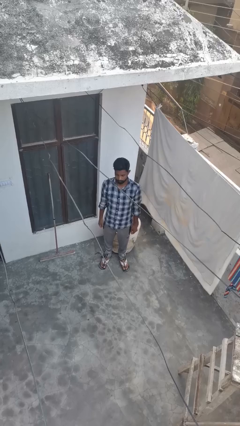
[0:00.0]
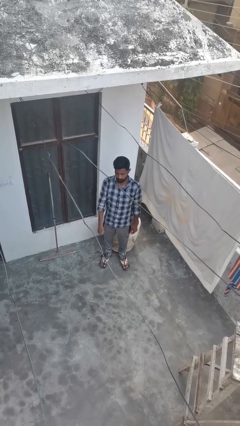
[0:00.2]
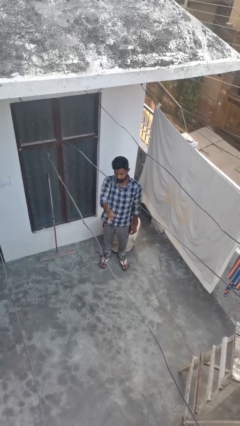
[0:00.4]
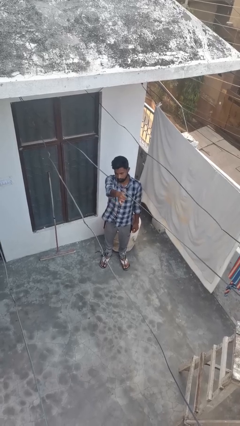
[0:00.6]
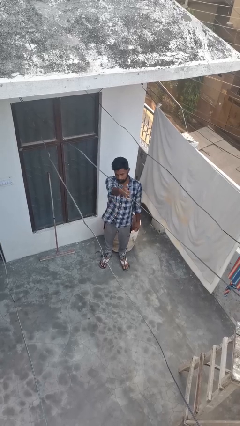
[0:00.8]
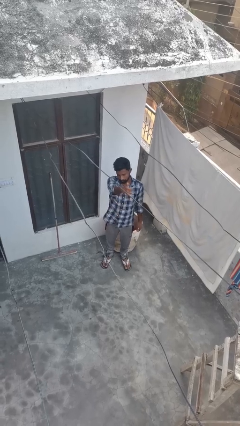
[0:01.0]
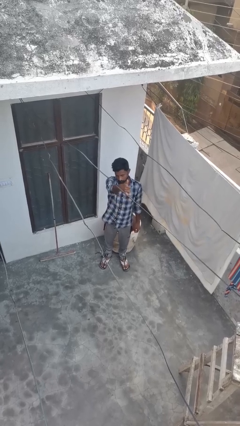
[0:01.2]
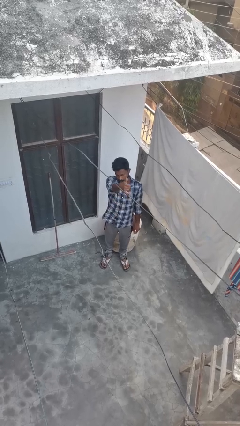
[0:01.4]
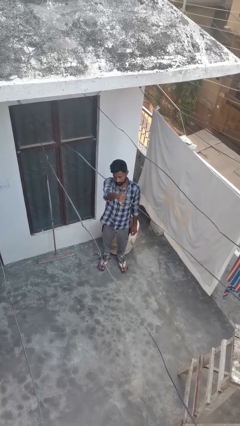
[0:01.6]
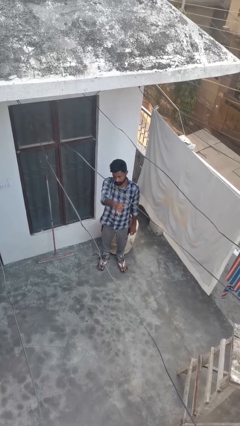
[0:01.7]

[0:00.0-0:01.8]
person gestures hang loose

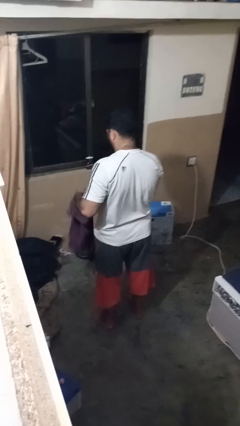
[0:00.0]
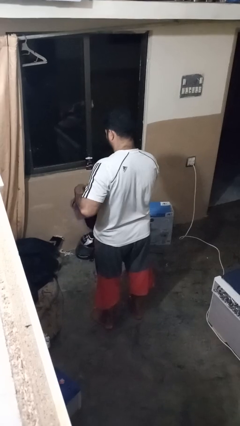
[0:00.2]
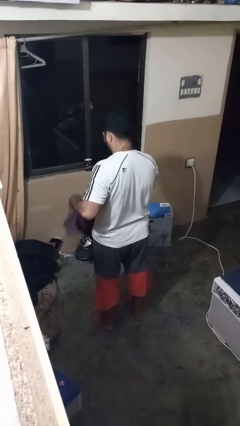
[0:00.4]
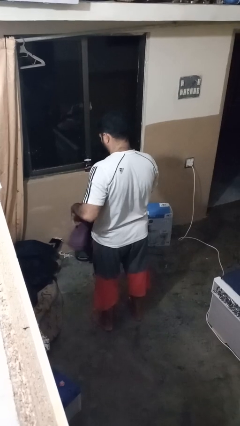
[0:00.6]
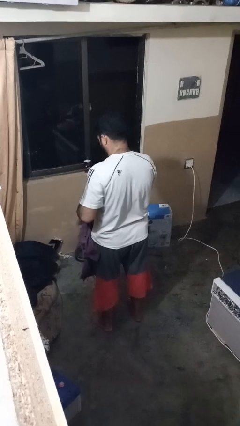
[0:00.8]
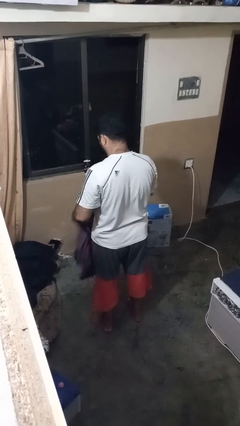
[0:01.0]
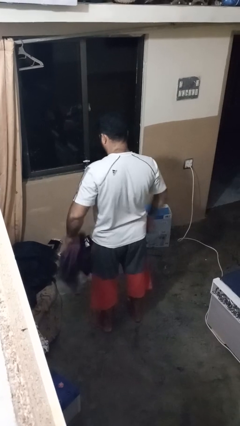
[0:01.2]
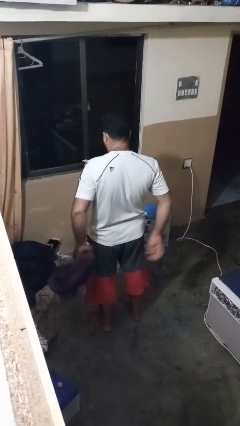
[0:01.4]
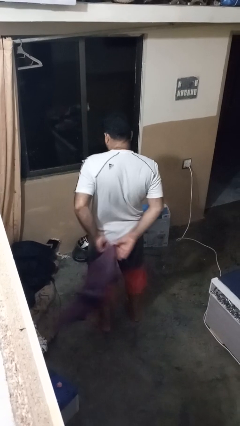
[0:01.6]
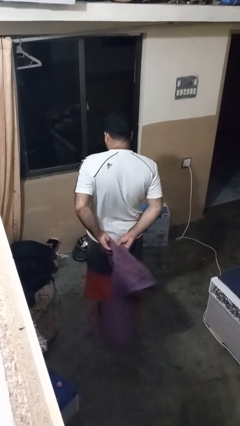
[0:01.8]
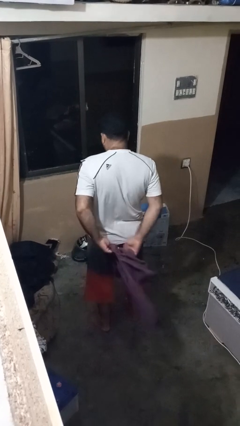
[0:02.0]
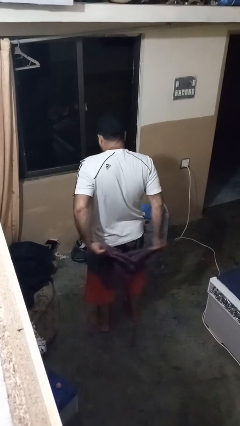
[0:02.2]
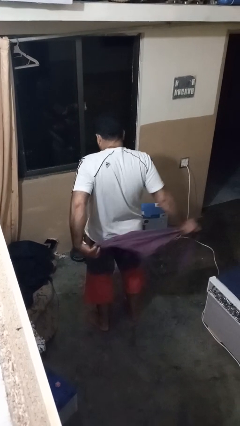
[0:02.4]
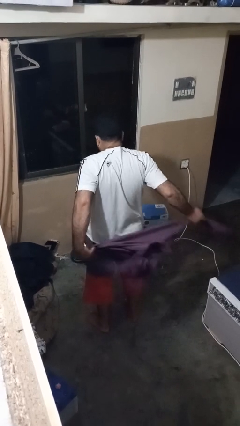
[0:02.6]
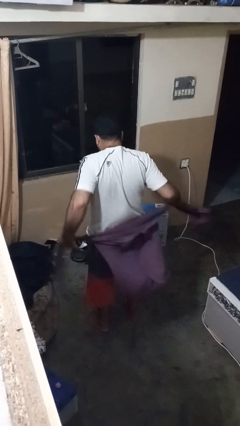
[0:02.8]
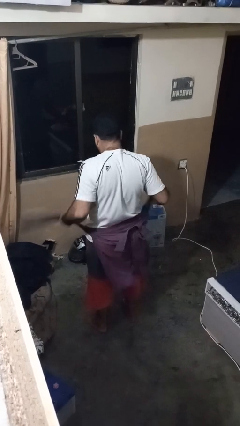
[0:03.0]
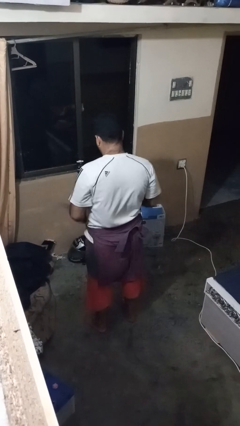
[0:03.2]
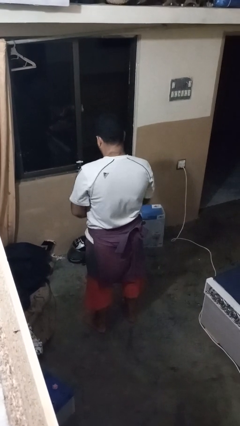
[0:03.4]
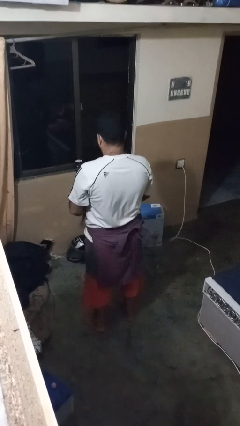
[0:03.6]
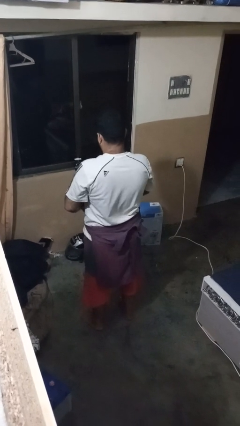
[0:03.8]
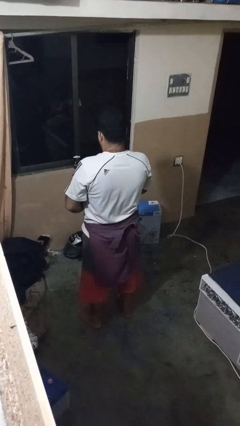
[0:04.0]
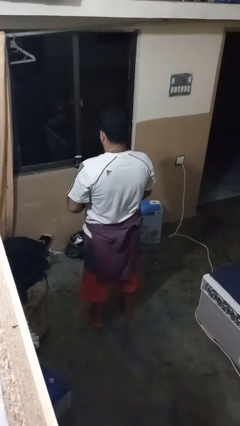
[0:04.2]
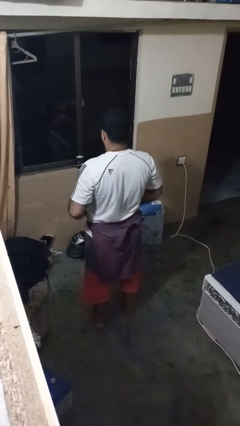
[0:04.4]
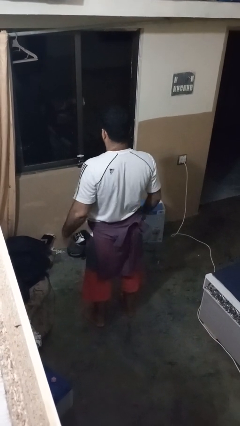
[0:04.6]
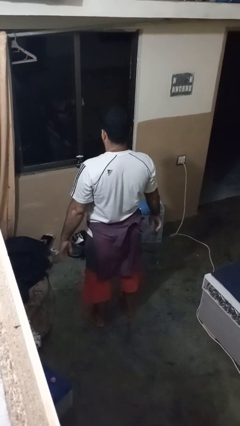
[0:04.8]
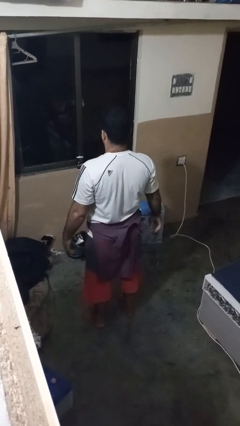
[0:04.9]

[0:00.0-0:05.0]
person ties jacket around waist

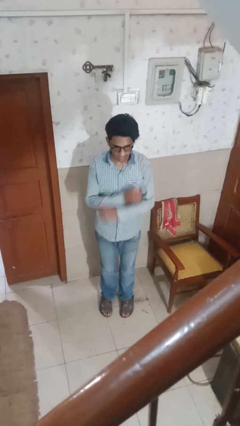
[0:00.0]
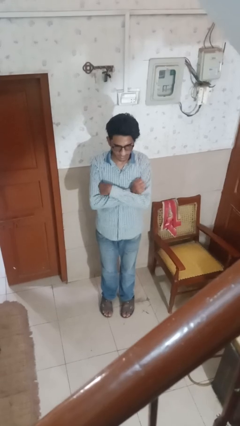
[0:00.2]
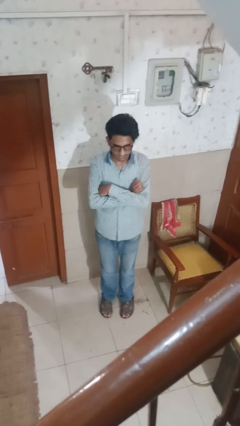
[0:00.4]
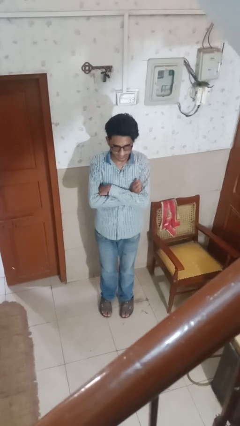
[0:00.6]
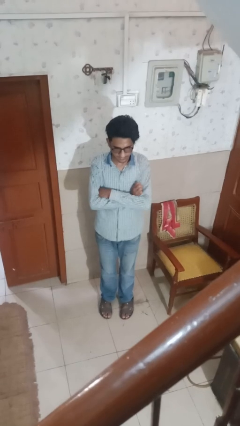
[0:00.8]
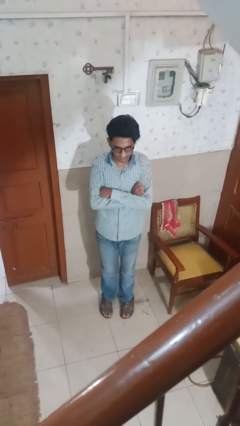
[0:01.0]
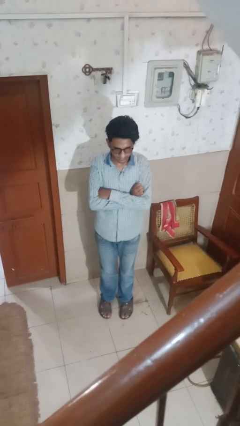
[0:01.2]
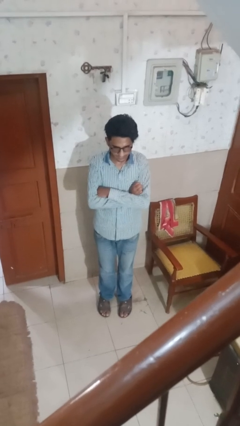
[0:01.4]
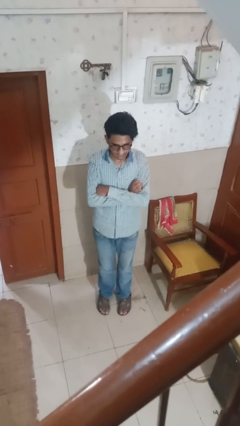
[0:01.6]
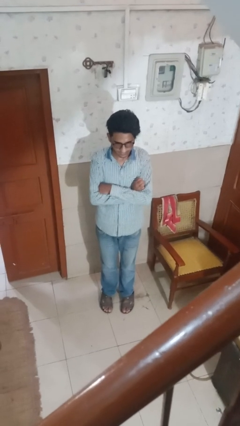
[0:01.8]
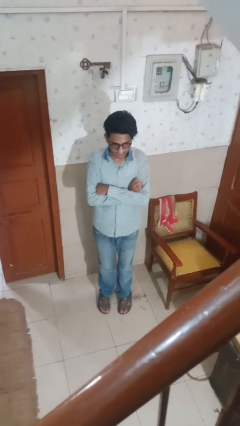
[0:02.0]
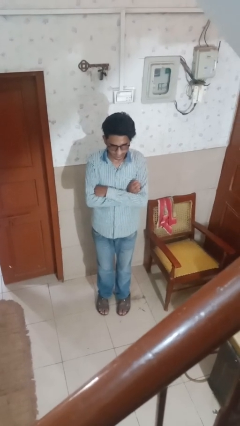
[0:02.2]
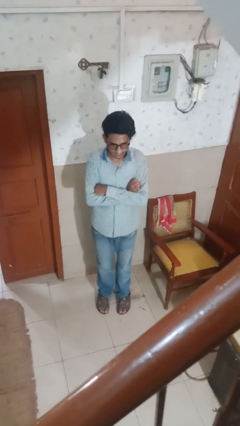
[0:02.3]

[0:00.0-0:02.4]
person crosses arms

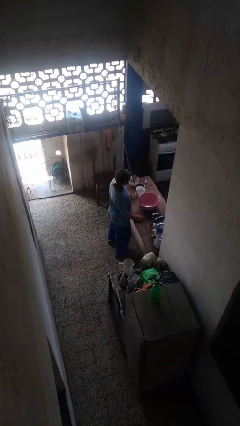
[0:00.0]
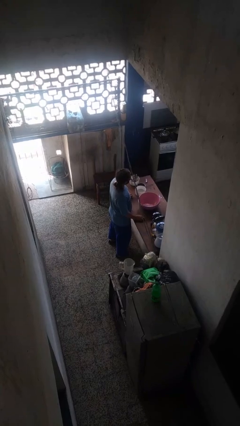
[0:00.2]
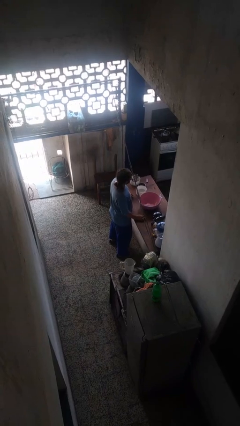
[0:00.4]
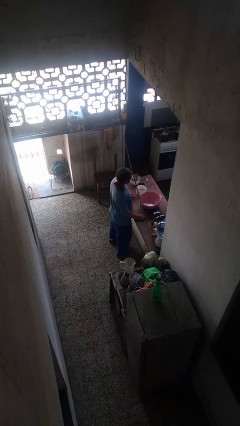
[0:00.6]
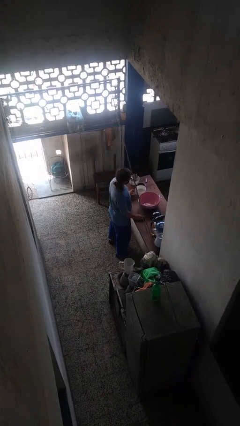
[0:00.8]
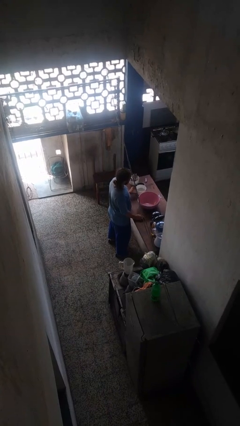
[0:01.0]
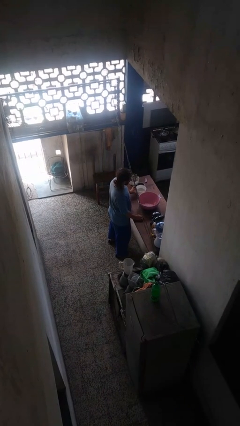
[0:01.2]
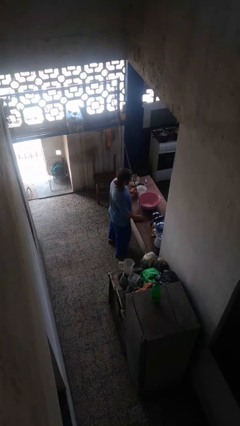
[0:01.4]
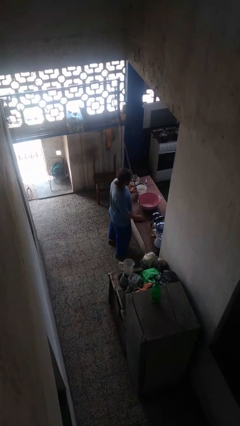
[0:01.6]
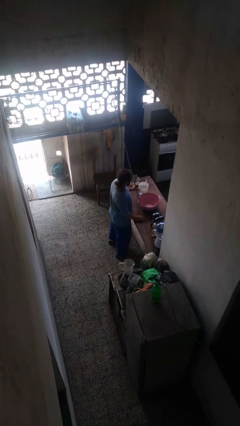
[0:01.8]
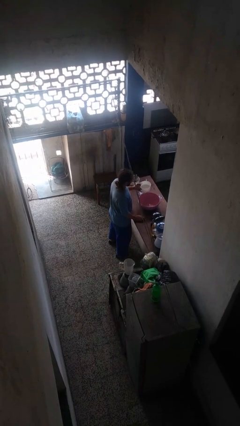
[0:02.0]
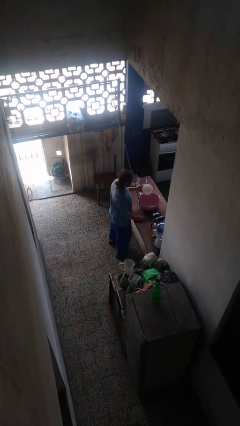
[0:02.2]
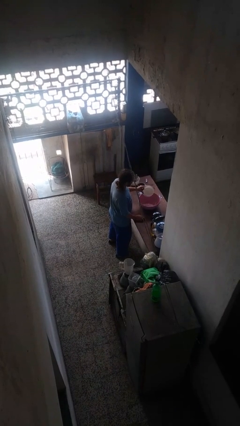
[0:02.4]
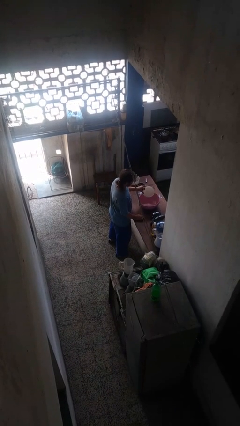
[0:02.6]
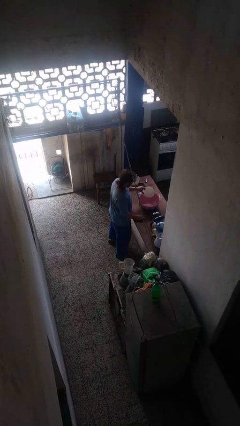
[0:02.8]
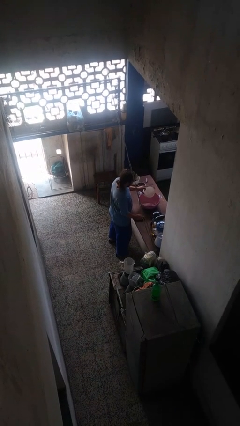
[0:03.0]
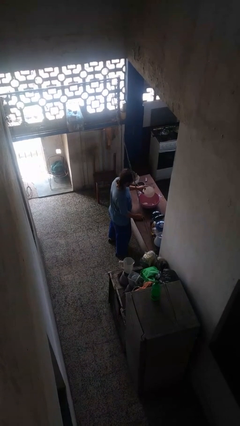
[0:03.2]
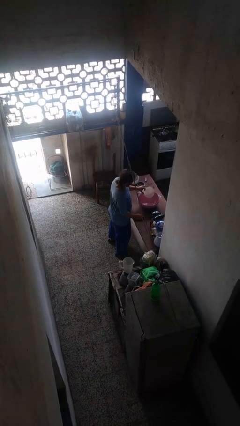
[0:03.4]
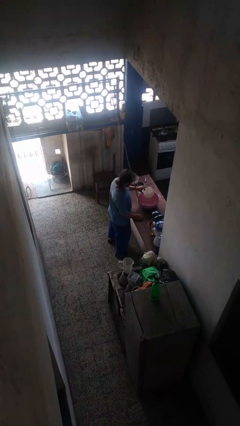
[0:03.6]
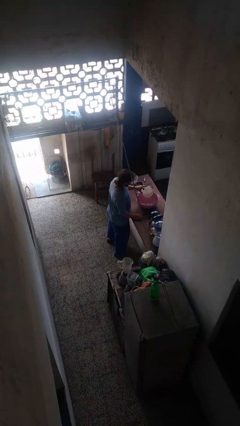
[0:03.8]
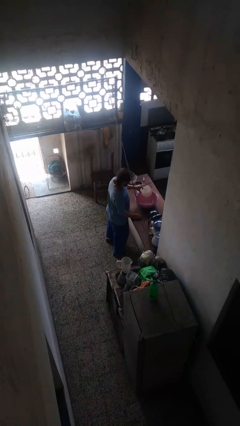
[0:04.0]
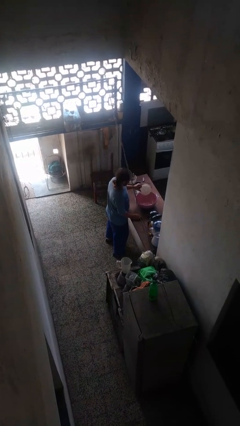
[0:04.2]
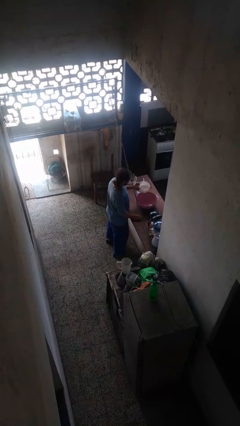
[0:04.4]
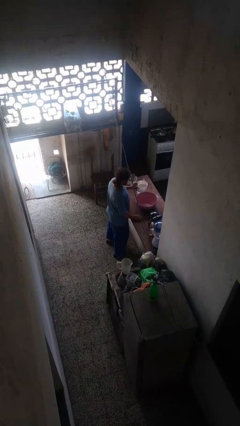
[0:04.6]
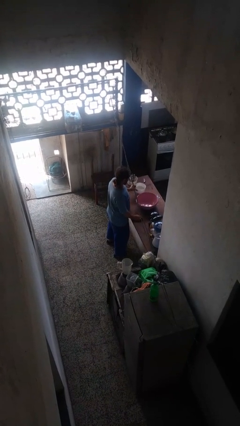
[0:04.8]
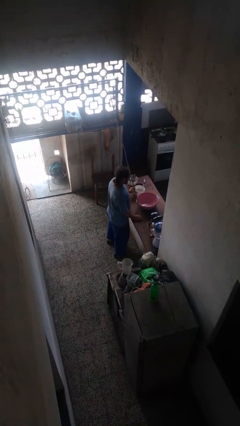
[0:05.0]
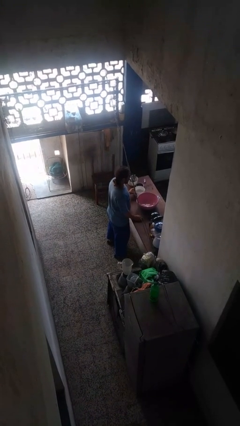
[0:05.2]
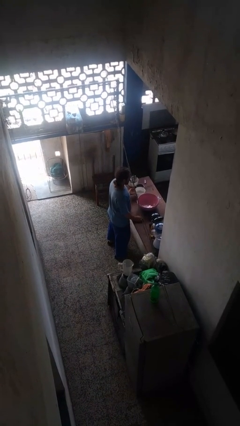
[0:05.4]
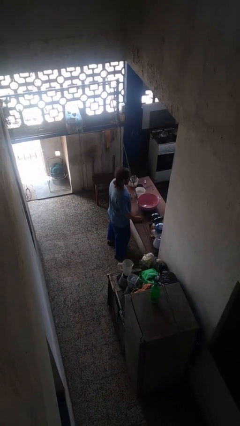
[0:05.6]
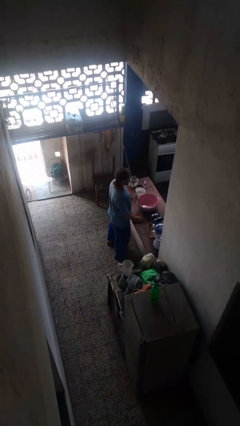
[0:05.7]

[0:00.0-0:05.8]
person pours into bowl

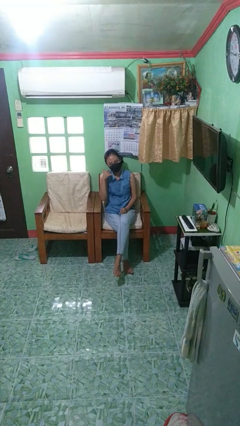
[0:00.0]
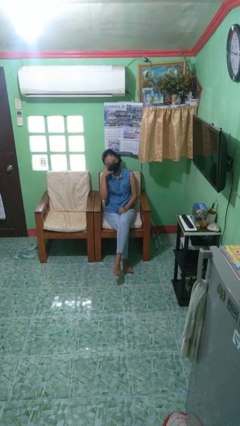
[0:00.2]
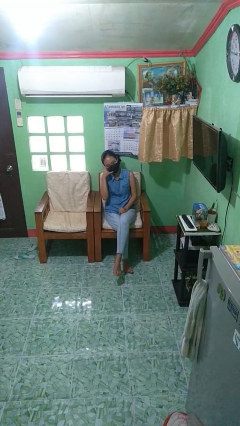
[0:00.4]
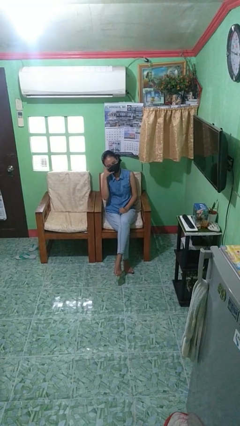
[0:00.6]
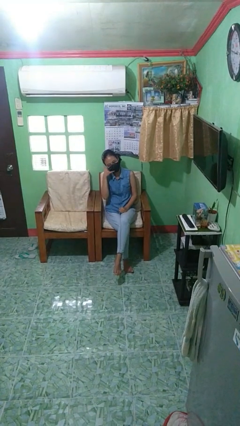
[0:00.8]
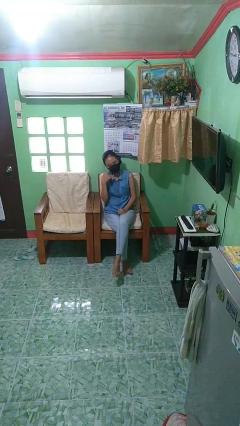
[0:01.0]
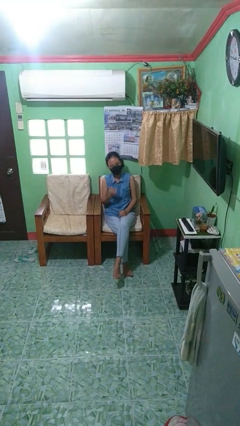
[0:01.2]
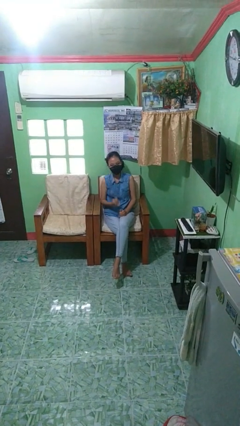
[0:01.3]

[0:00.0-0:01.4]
person gestures call me

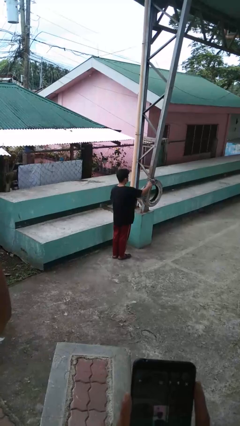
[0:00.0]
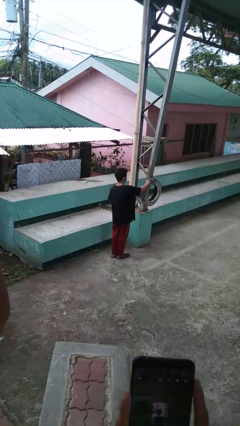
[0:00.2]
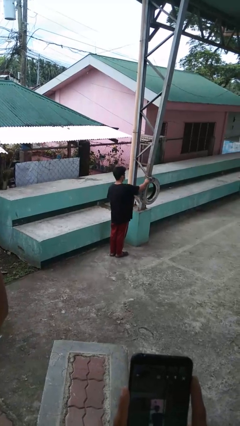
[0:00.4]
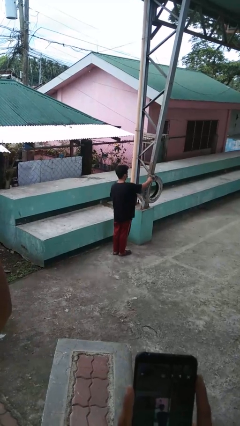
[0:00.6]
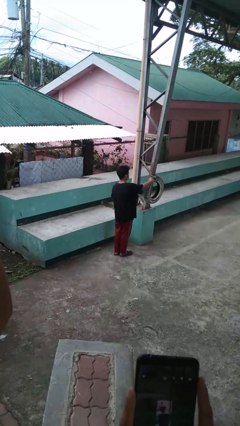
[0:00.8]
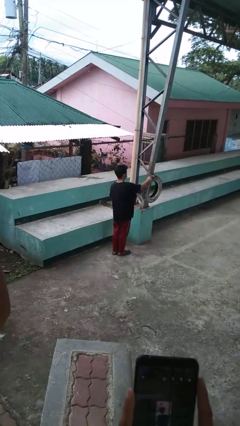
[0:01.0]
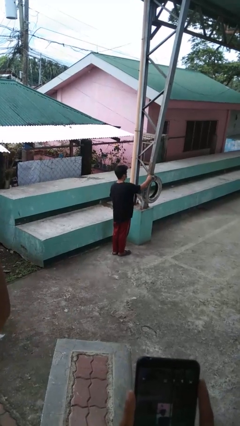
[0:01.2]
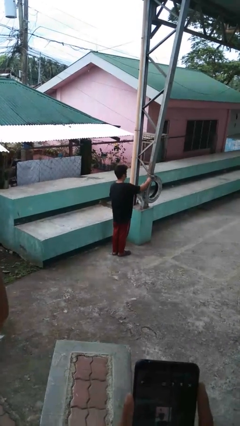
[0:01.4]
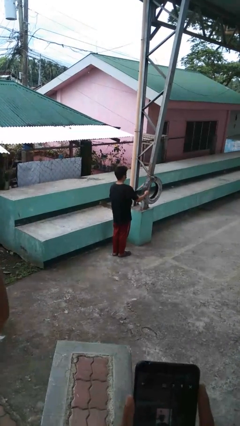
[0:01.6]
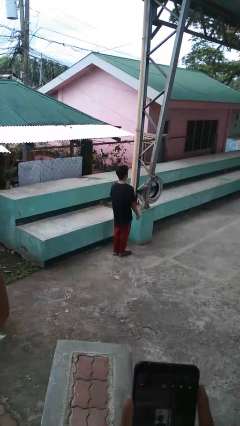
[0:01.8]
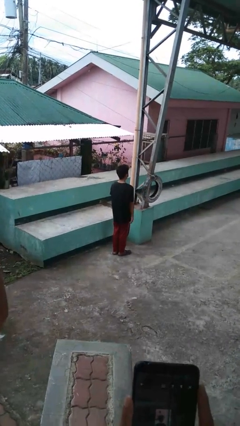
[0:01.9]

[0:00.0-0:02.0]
person taps object with finger
